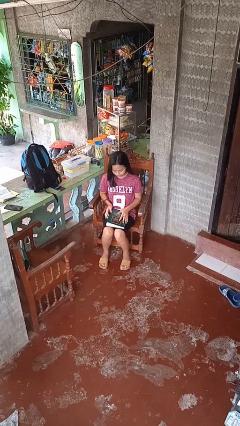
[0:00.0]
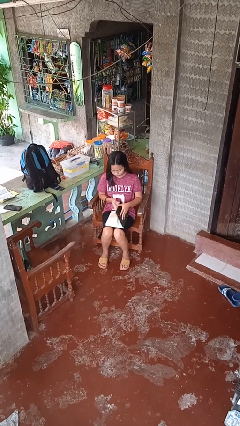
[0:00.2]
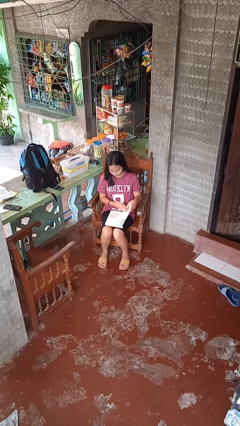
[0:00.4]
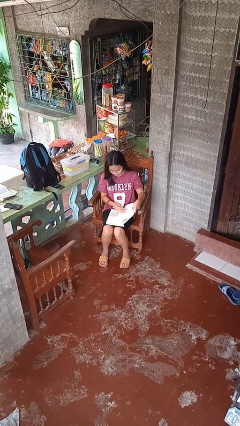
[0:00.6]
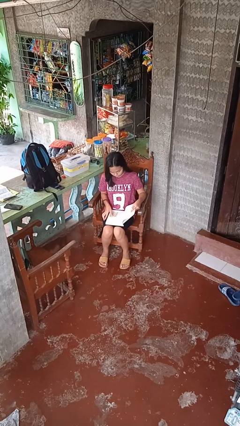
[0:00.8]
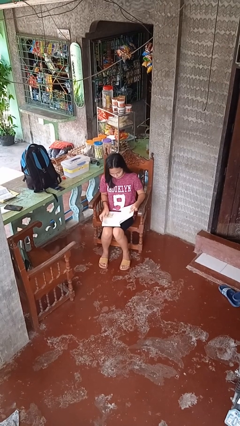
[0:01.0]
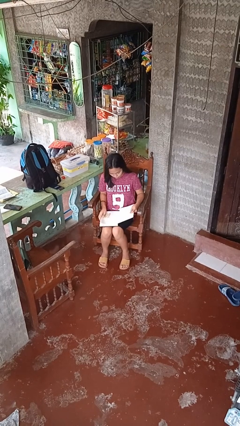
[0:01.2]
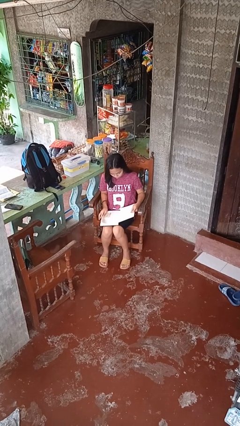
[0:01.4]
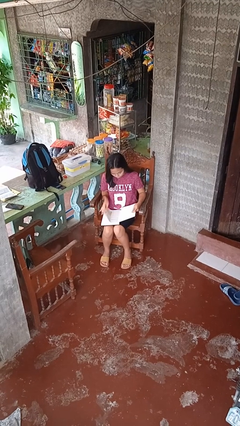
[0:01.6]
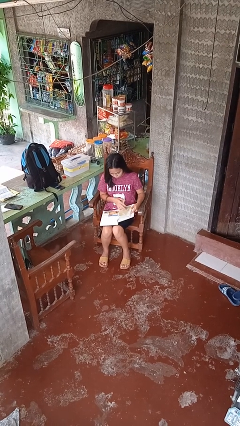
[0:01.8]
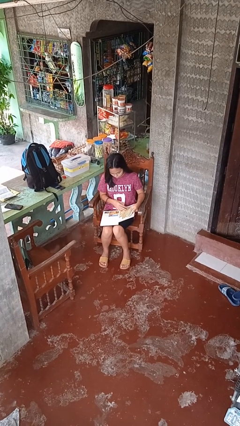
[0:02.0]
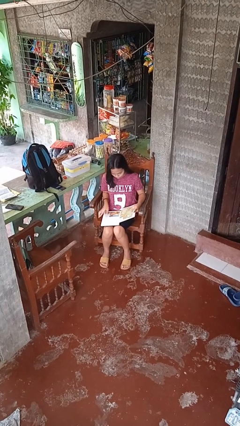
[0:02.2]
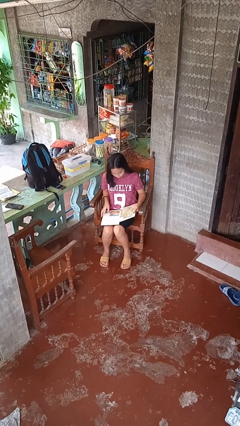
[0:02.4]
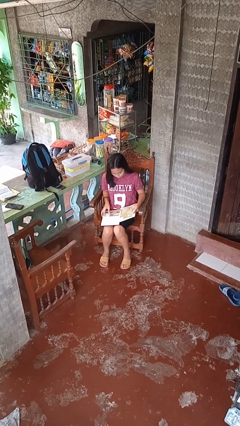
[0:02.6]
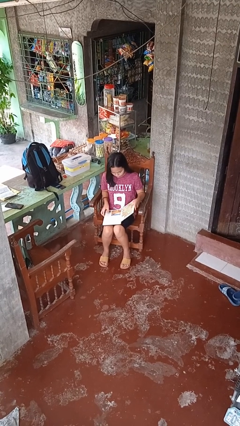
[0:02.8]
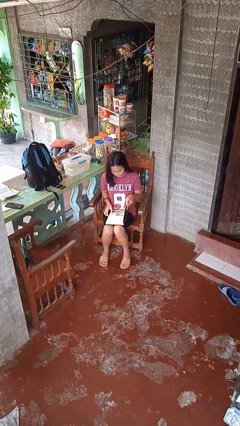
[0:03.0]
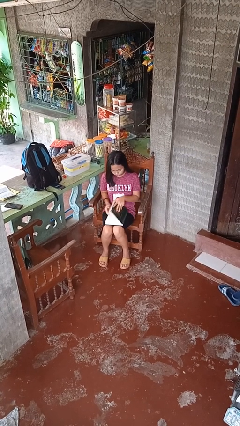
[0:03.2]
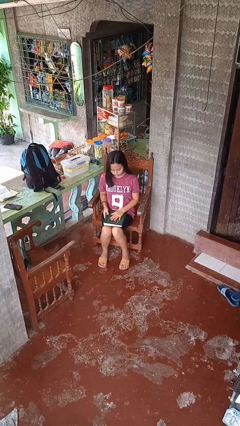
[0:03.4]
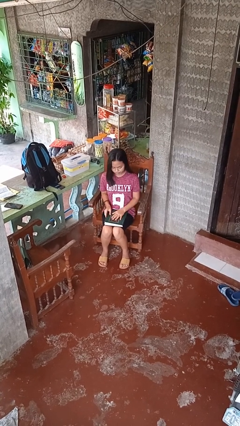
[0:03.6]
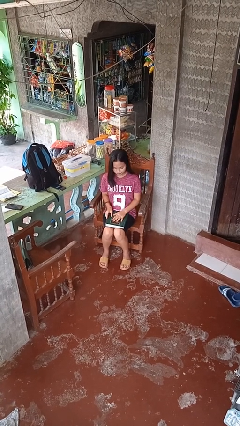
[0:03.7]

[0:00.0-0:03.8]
person reads book

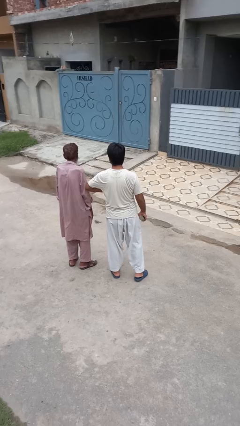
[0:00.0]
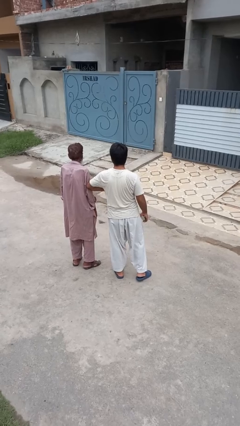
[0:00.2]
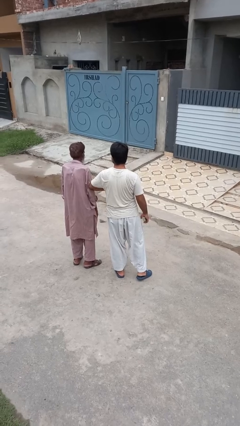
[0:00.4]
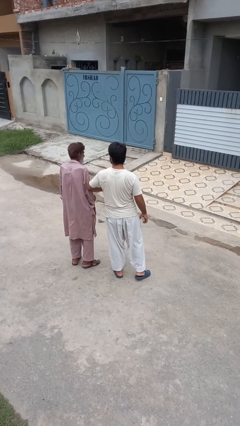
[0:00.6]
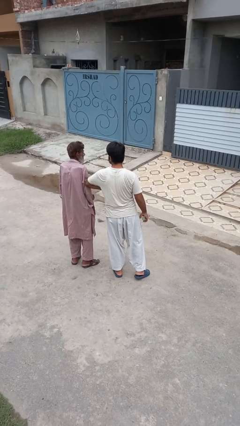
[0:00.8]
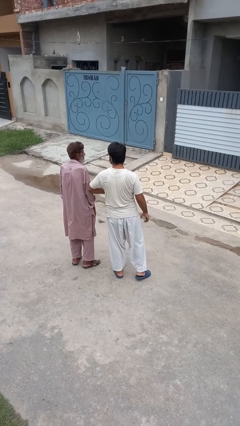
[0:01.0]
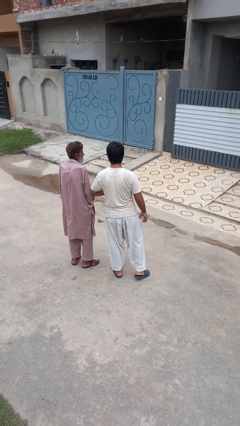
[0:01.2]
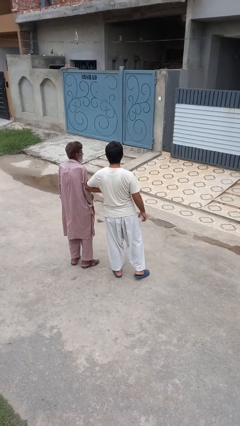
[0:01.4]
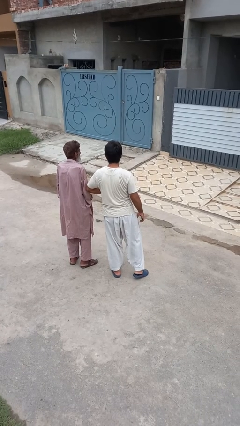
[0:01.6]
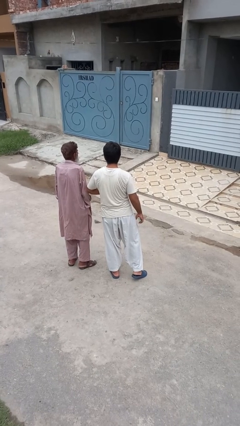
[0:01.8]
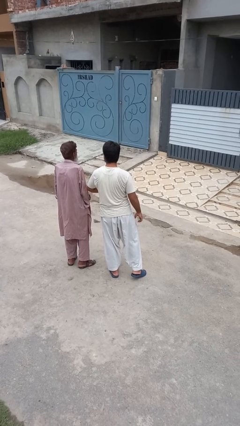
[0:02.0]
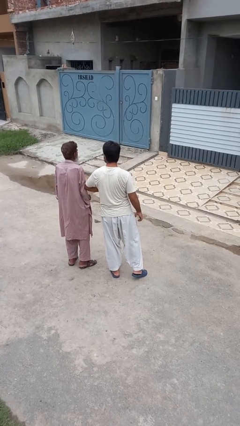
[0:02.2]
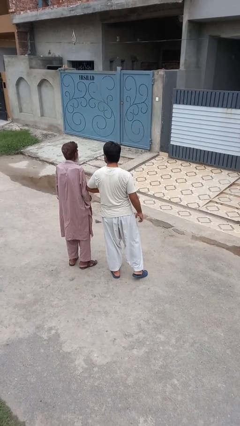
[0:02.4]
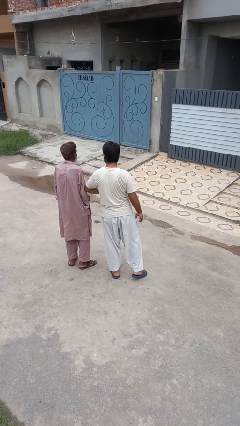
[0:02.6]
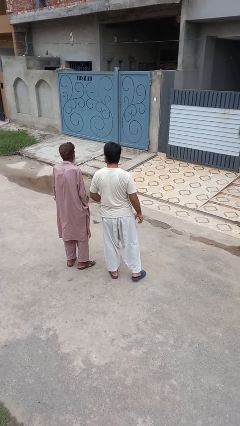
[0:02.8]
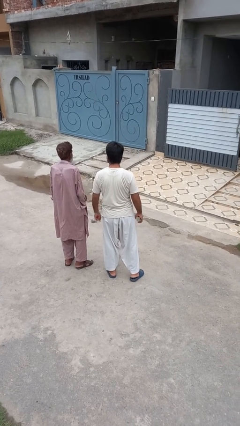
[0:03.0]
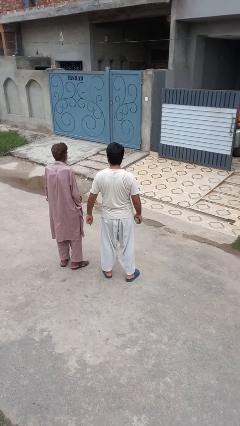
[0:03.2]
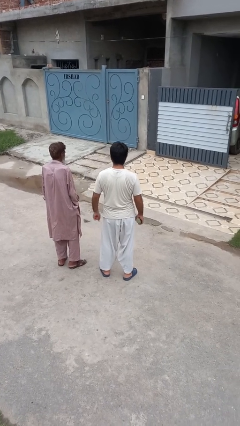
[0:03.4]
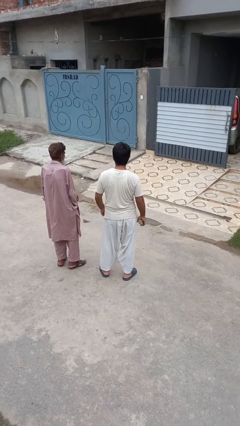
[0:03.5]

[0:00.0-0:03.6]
person nudges person with elbow

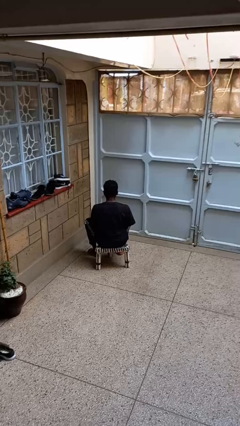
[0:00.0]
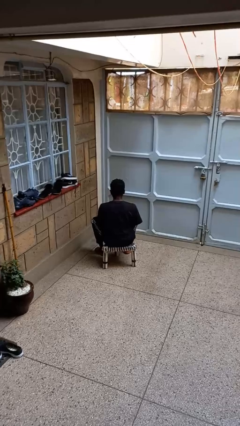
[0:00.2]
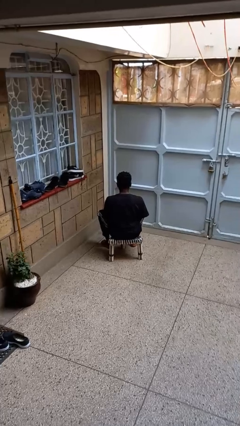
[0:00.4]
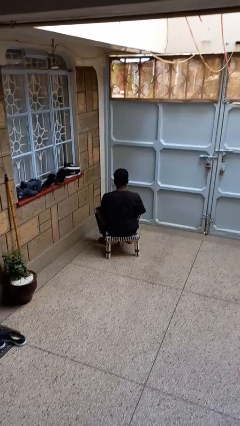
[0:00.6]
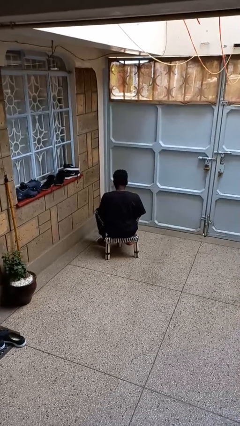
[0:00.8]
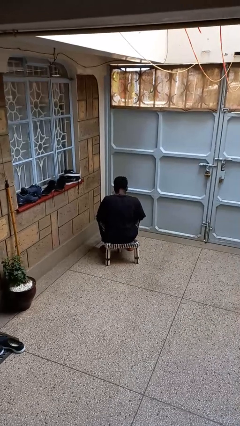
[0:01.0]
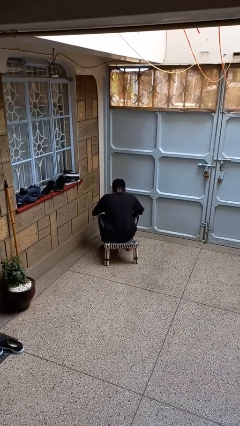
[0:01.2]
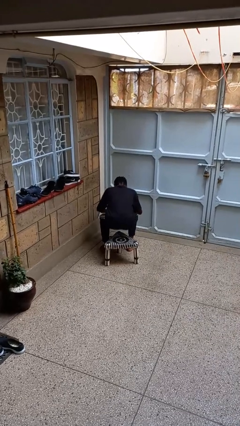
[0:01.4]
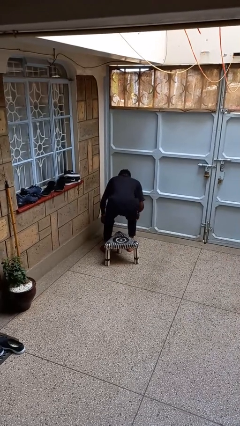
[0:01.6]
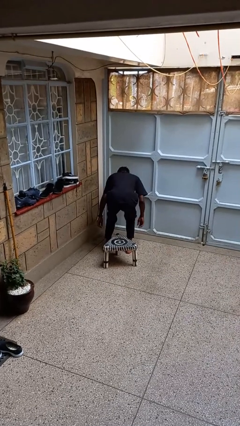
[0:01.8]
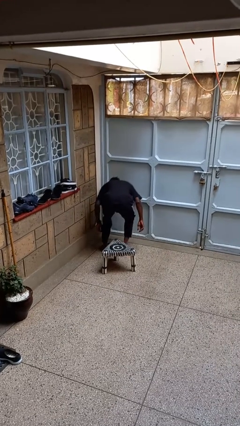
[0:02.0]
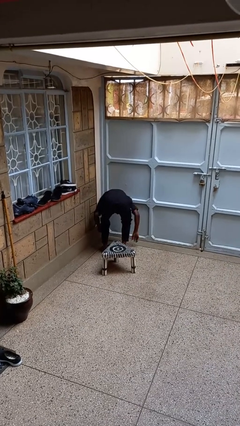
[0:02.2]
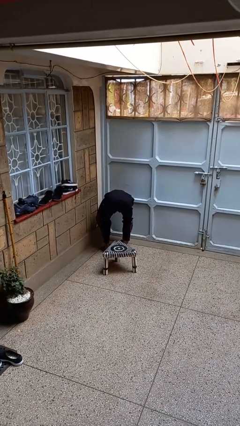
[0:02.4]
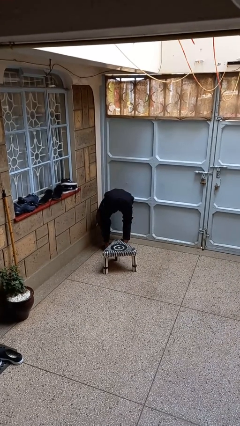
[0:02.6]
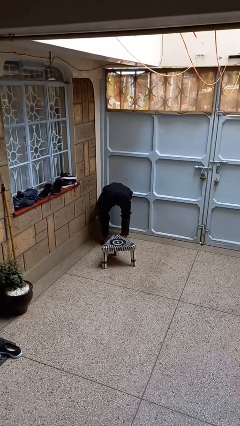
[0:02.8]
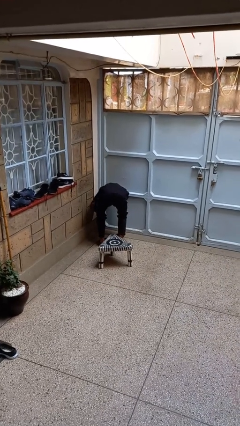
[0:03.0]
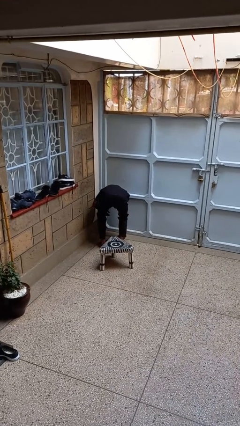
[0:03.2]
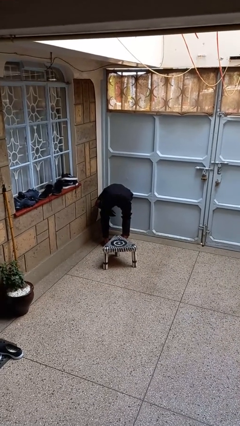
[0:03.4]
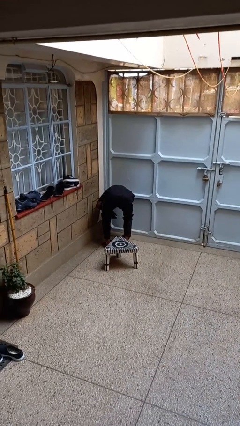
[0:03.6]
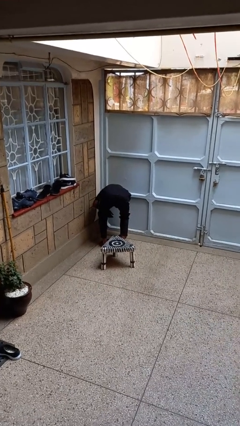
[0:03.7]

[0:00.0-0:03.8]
person falls from chair

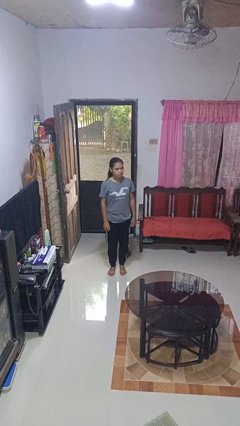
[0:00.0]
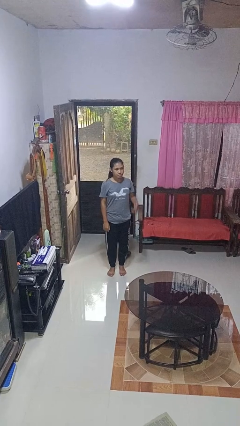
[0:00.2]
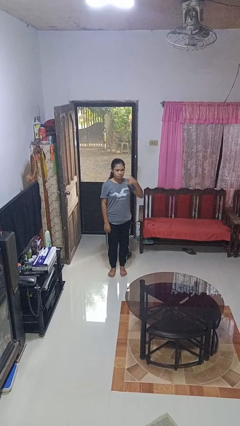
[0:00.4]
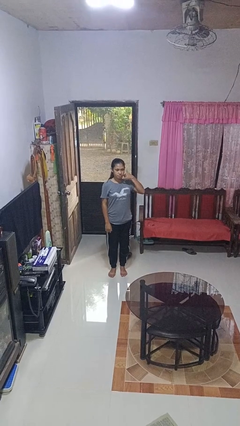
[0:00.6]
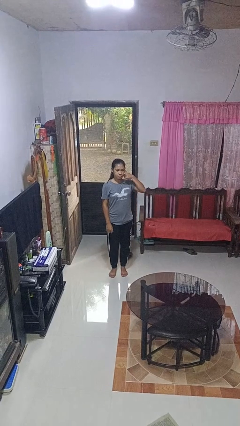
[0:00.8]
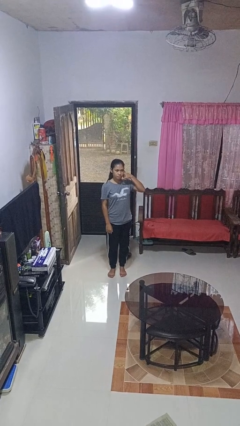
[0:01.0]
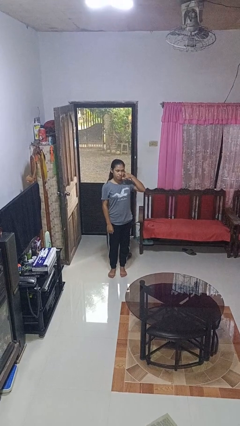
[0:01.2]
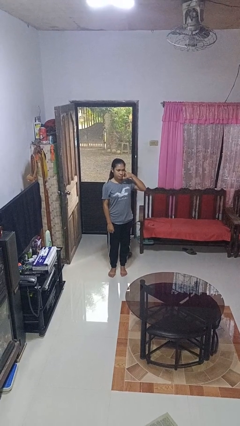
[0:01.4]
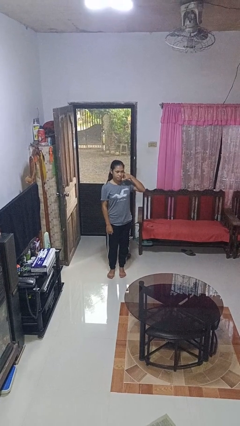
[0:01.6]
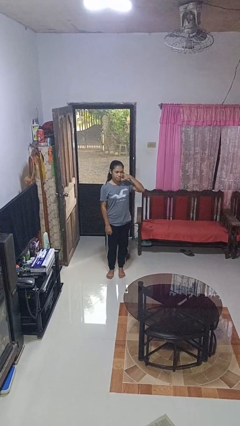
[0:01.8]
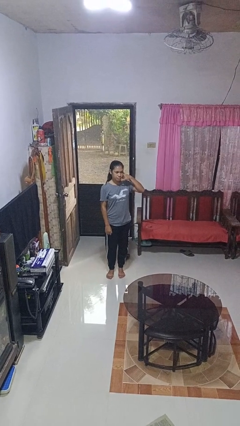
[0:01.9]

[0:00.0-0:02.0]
person gestures call me

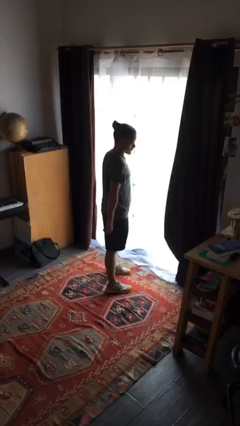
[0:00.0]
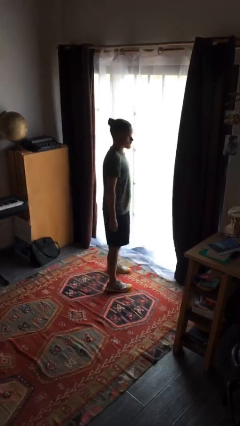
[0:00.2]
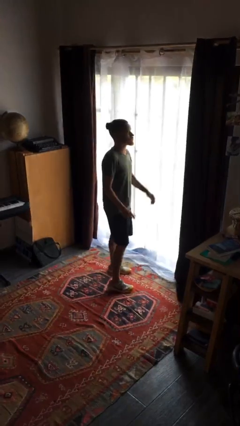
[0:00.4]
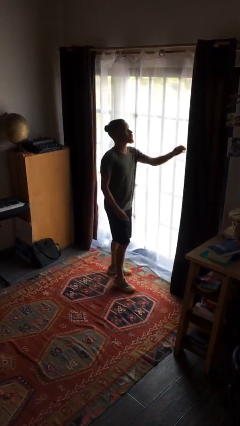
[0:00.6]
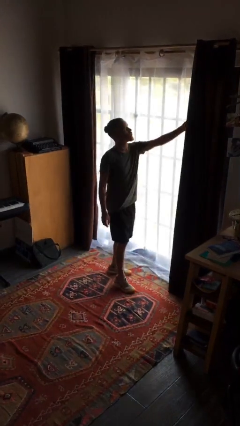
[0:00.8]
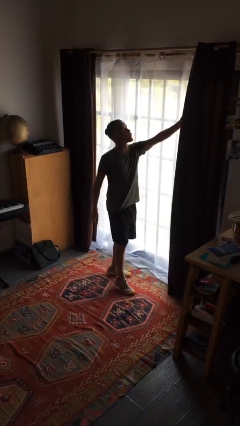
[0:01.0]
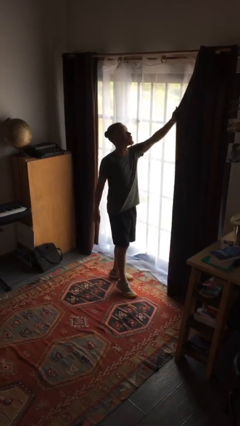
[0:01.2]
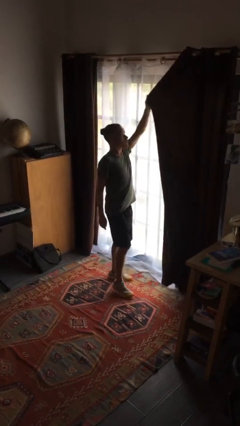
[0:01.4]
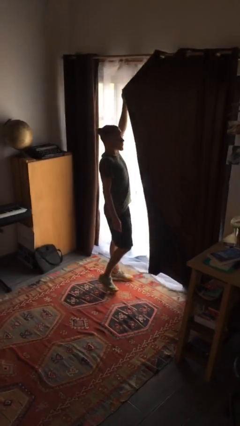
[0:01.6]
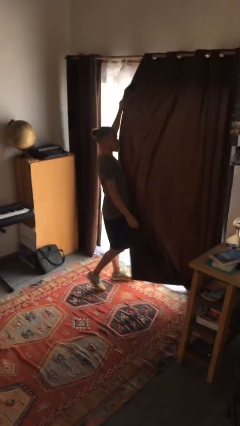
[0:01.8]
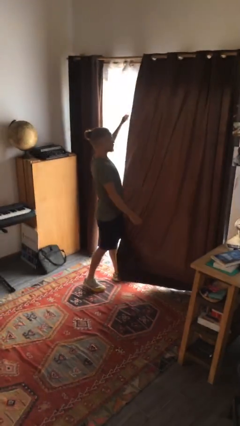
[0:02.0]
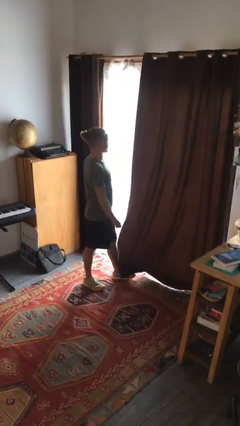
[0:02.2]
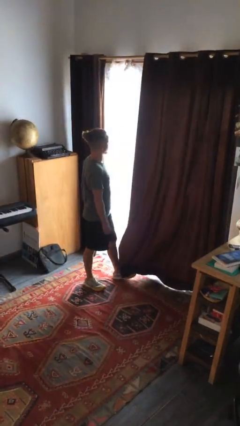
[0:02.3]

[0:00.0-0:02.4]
person closes curtains

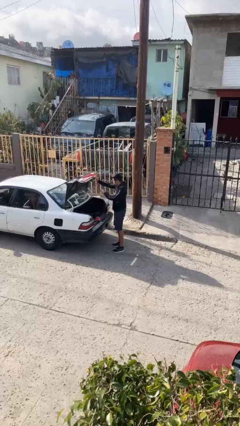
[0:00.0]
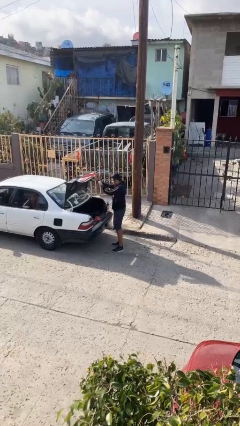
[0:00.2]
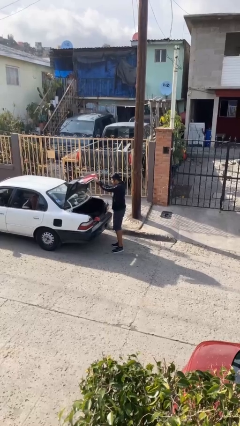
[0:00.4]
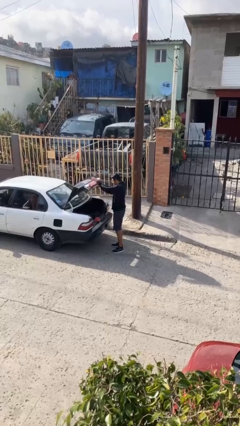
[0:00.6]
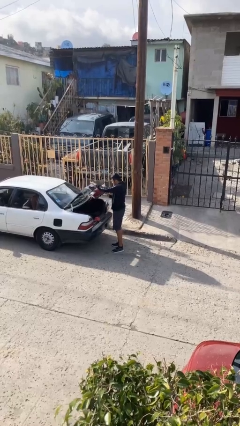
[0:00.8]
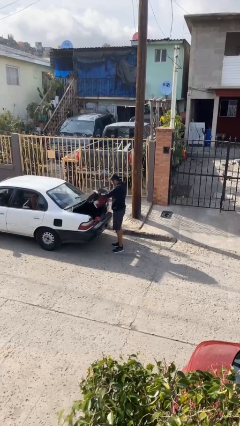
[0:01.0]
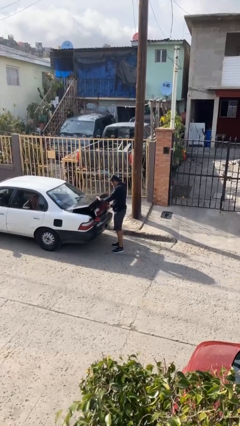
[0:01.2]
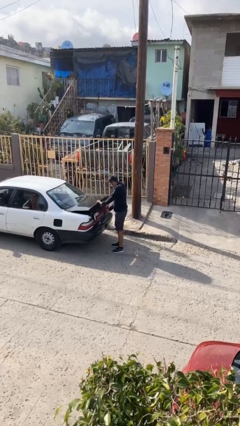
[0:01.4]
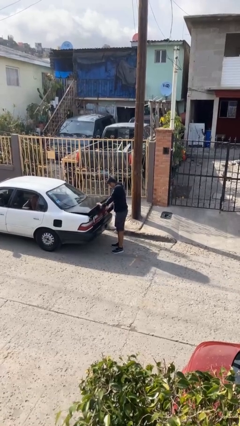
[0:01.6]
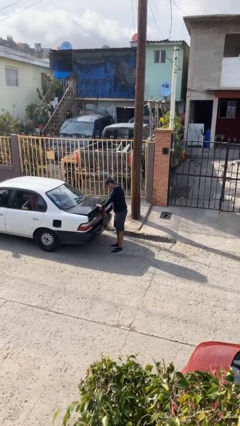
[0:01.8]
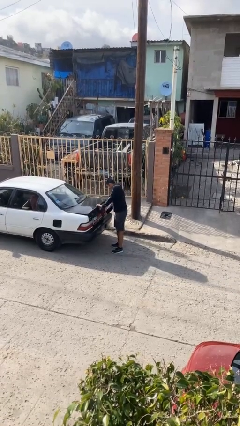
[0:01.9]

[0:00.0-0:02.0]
person closes car trunk
